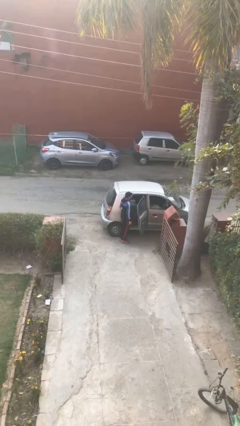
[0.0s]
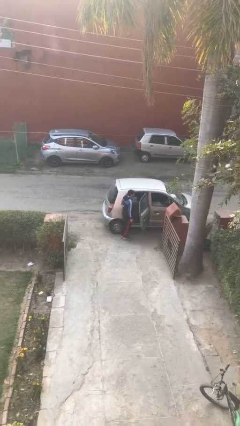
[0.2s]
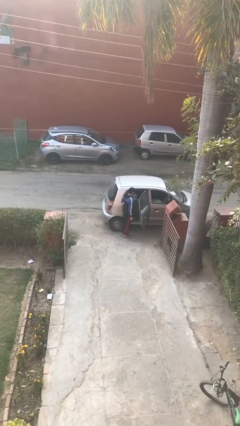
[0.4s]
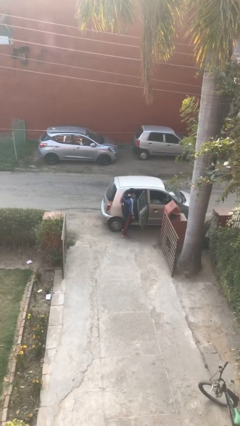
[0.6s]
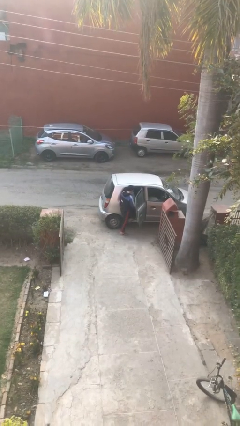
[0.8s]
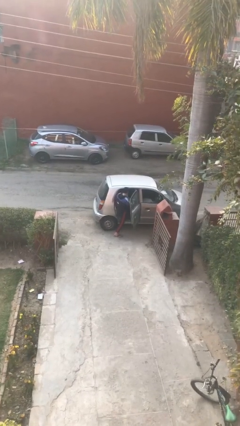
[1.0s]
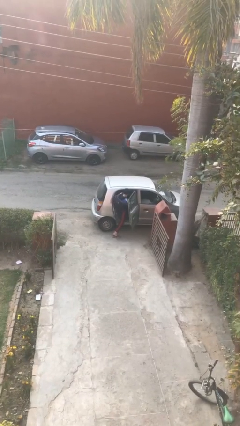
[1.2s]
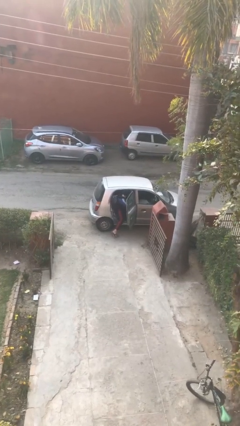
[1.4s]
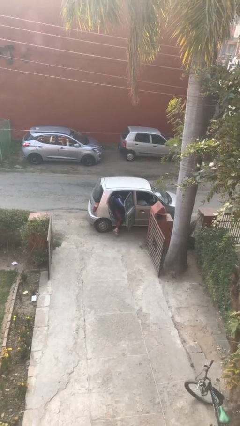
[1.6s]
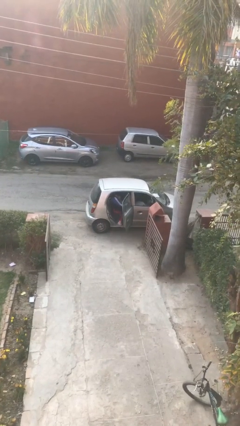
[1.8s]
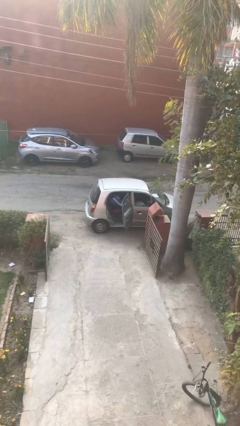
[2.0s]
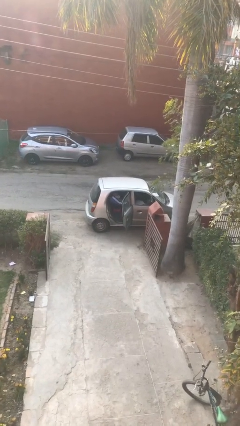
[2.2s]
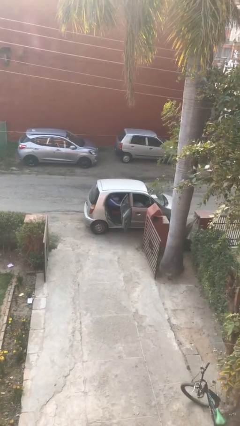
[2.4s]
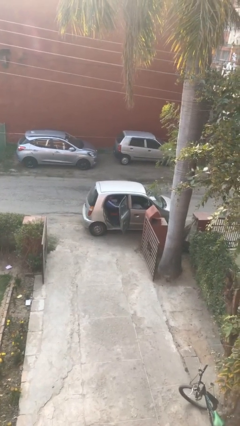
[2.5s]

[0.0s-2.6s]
person enters car

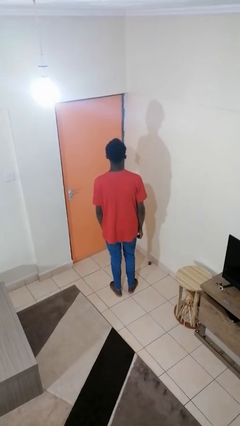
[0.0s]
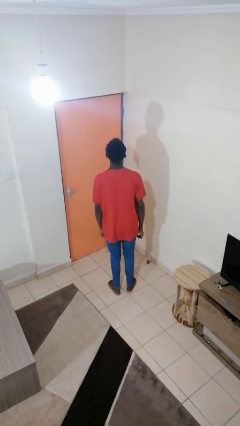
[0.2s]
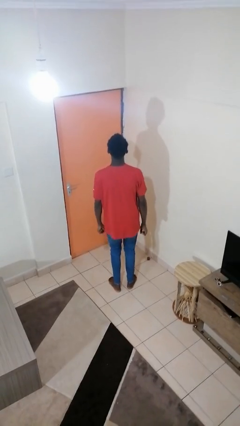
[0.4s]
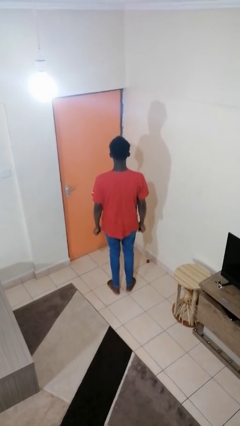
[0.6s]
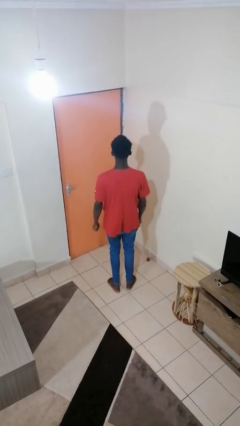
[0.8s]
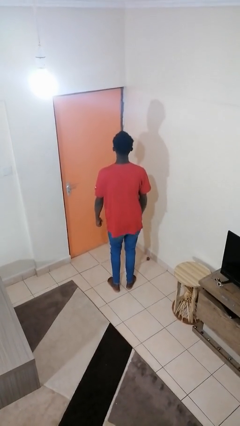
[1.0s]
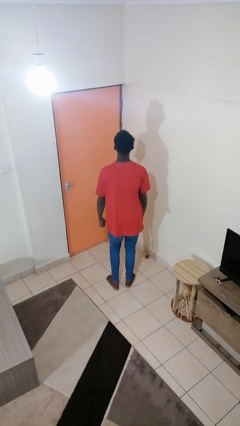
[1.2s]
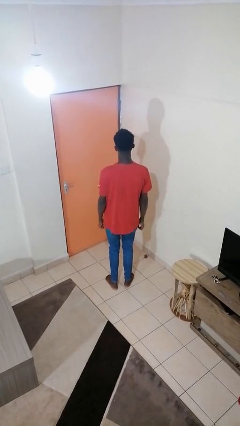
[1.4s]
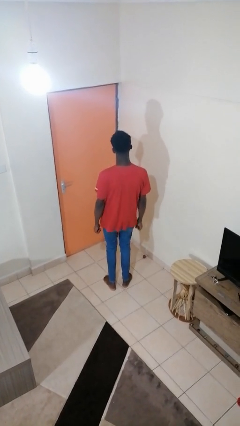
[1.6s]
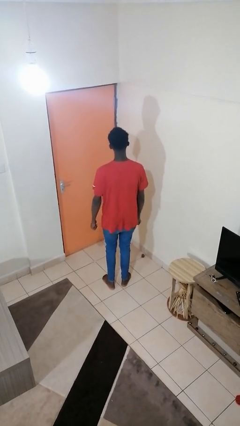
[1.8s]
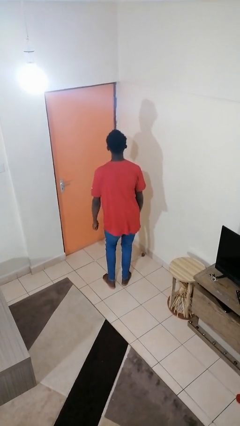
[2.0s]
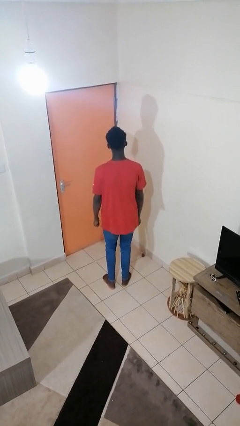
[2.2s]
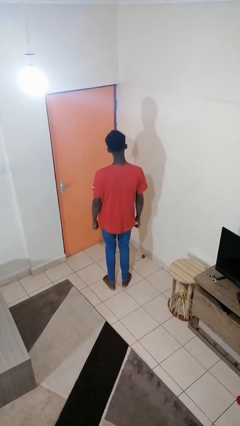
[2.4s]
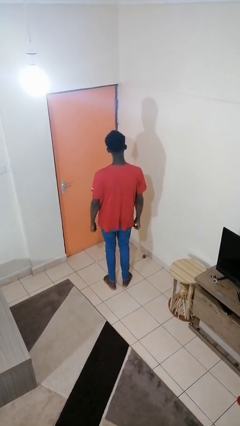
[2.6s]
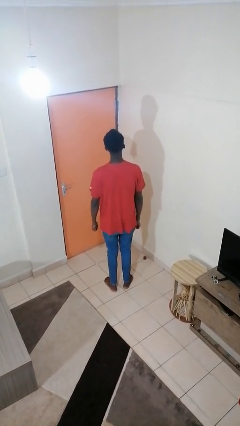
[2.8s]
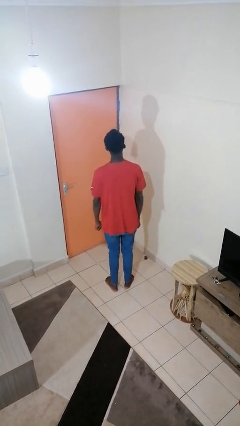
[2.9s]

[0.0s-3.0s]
person wiggles hips

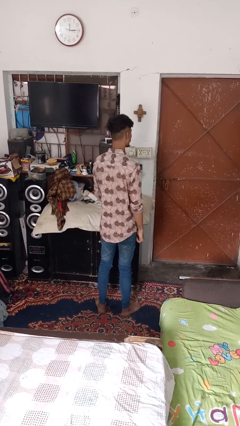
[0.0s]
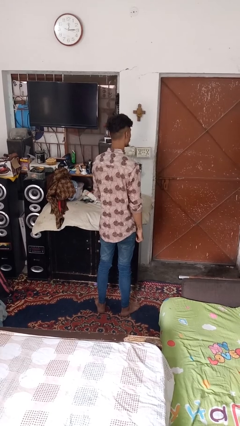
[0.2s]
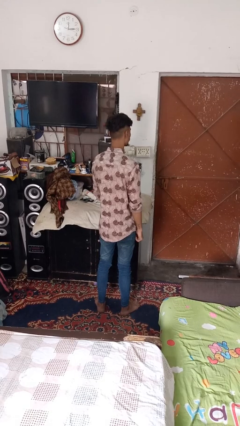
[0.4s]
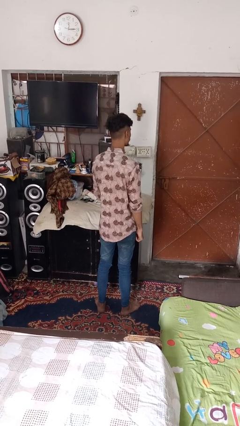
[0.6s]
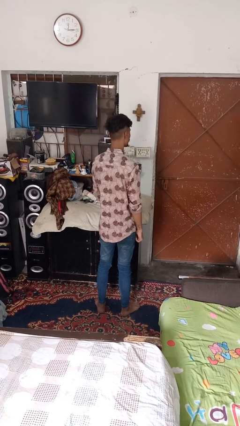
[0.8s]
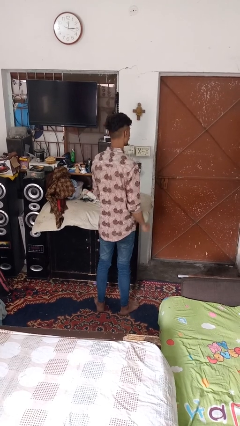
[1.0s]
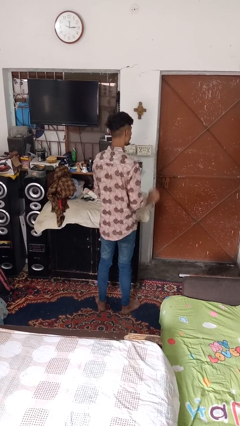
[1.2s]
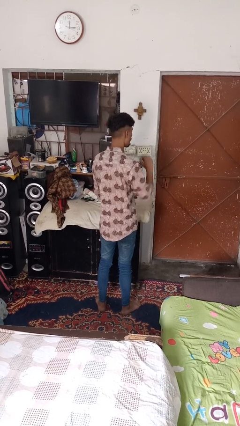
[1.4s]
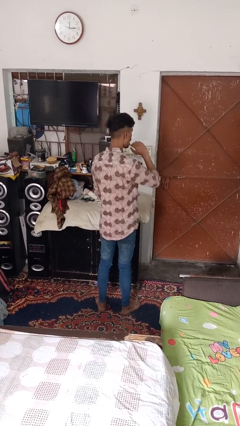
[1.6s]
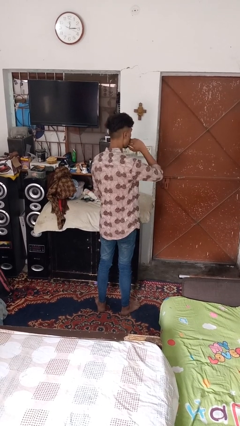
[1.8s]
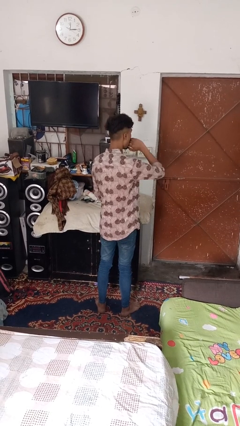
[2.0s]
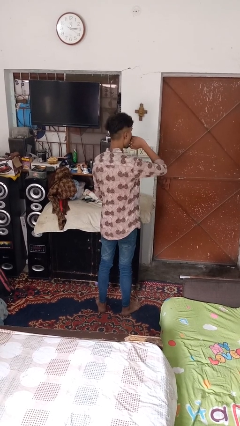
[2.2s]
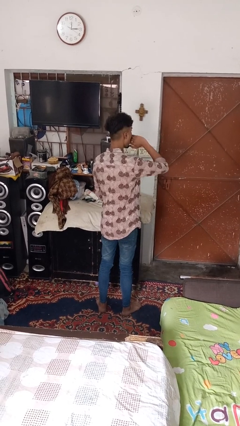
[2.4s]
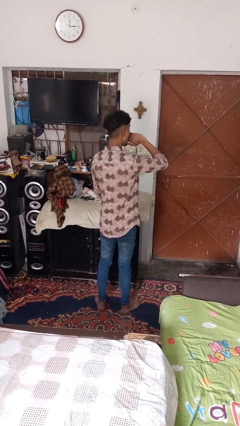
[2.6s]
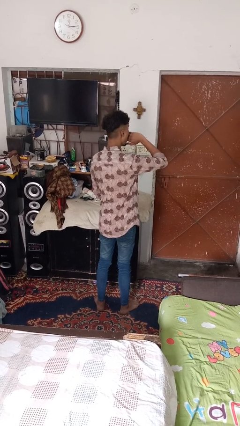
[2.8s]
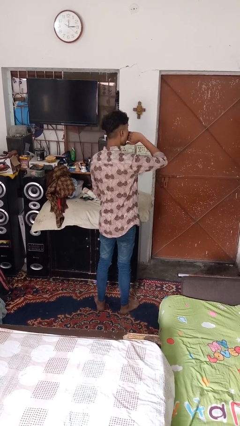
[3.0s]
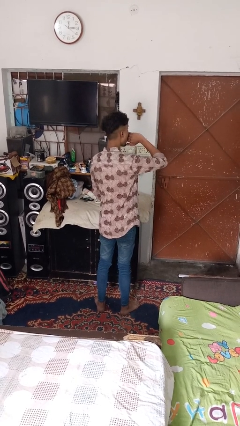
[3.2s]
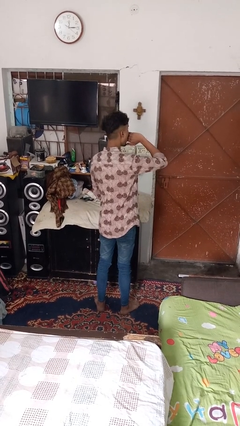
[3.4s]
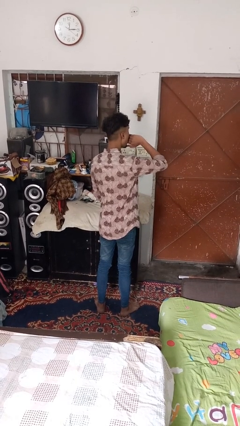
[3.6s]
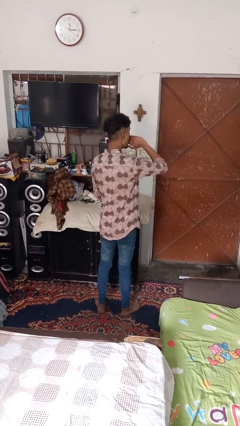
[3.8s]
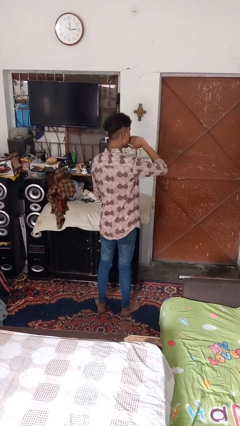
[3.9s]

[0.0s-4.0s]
person yawns

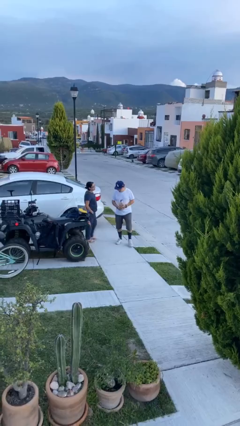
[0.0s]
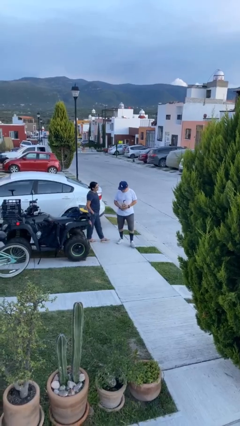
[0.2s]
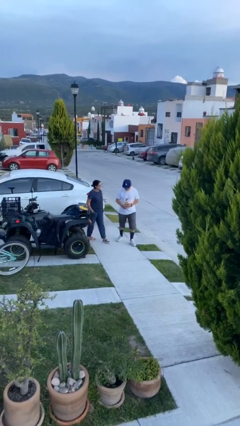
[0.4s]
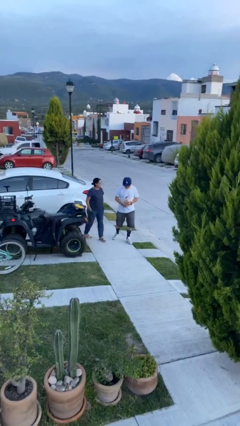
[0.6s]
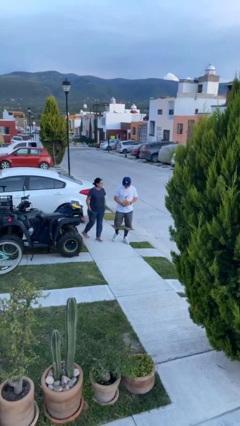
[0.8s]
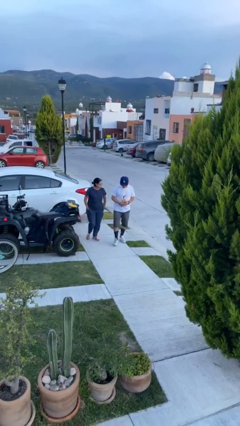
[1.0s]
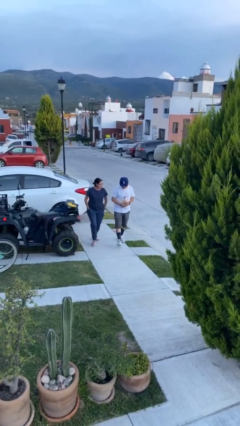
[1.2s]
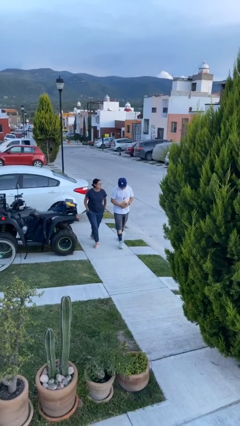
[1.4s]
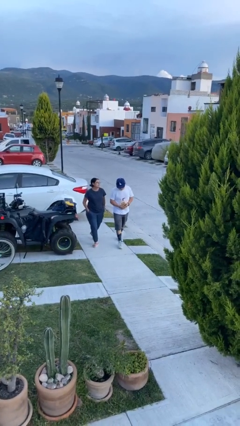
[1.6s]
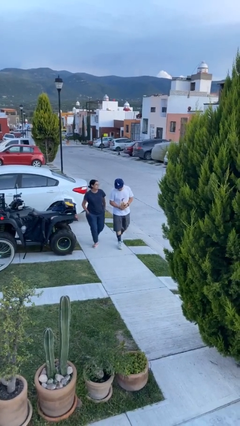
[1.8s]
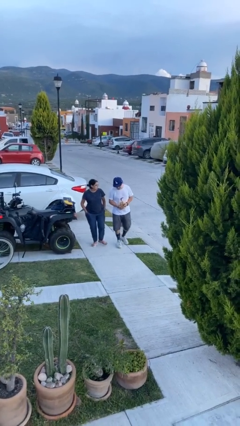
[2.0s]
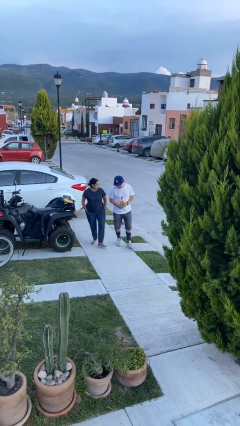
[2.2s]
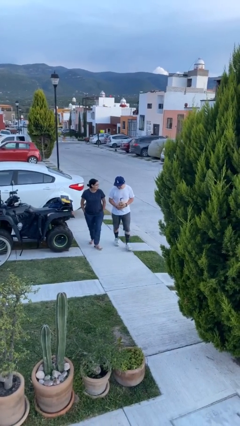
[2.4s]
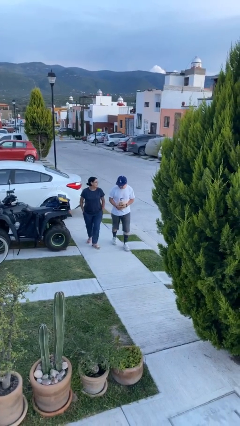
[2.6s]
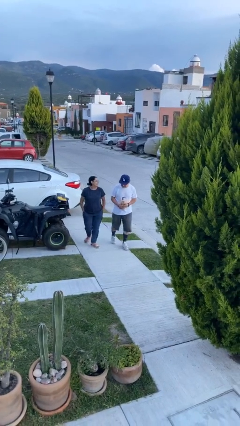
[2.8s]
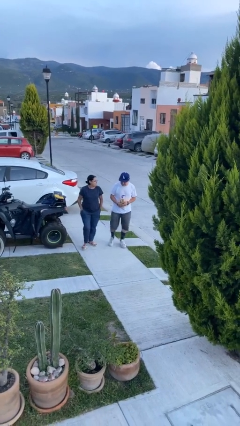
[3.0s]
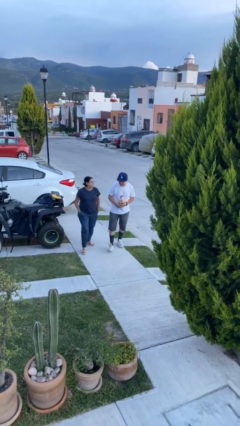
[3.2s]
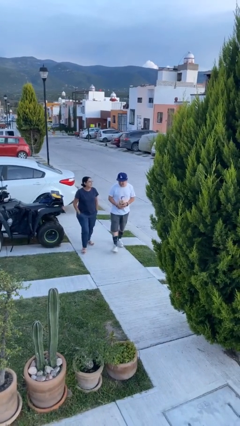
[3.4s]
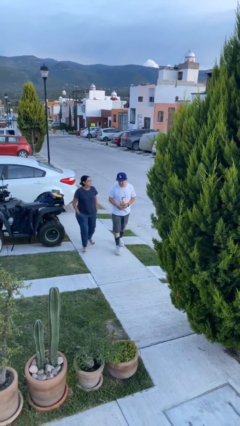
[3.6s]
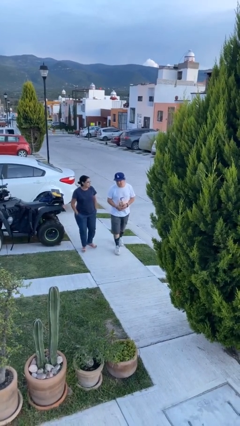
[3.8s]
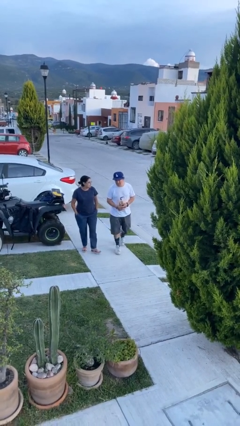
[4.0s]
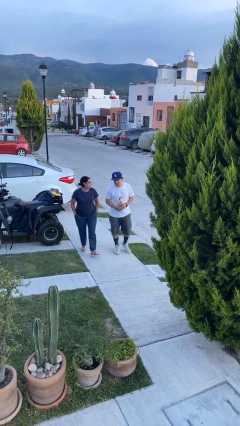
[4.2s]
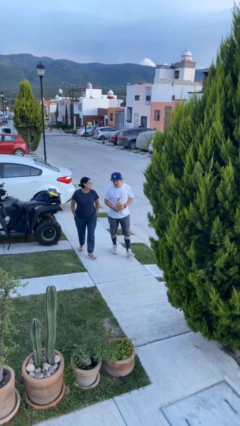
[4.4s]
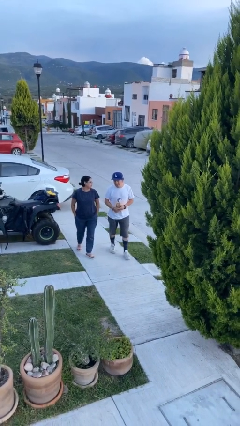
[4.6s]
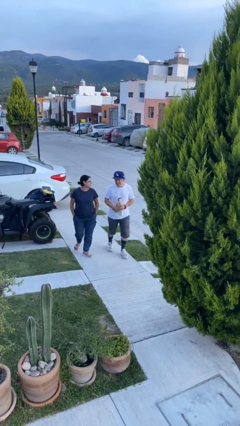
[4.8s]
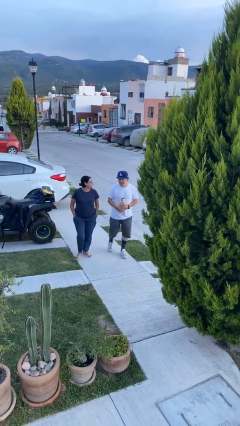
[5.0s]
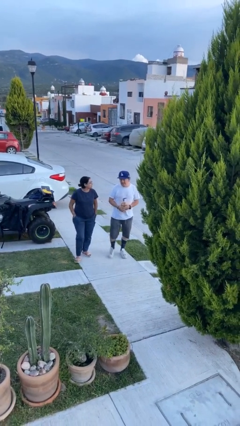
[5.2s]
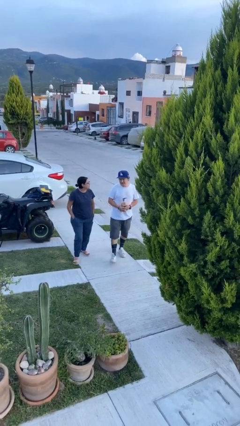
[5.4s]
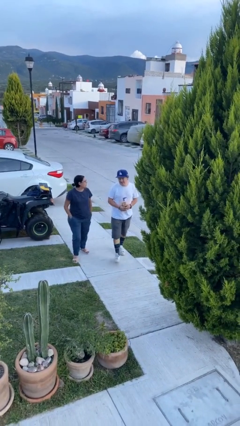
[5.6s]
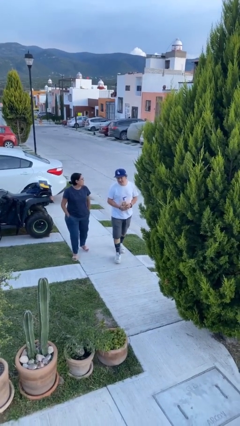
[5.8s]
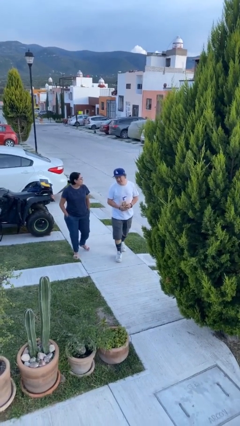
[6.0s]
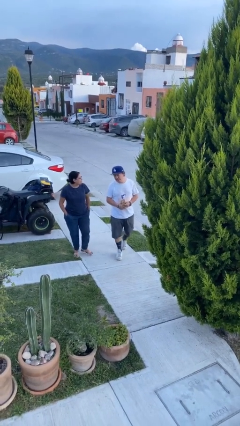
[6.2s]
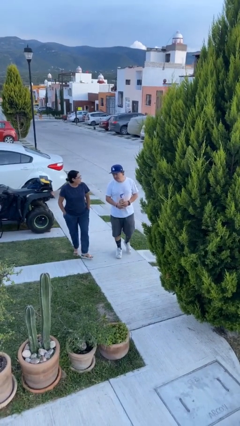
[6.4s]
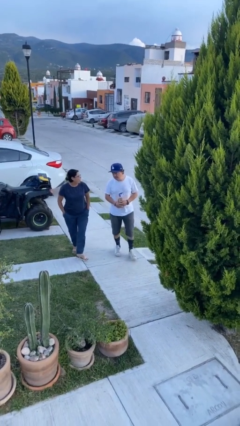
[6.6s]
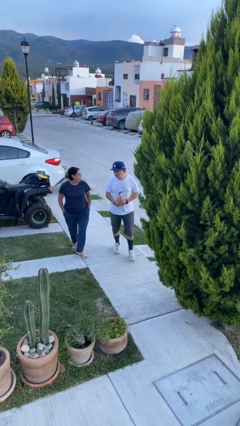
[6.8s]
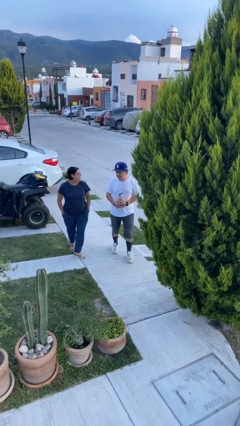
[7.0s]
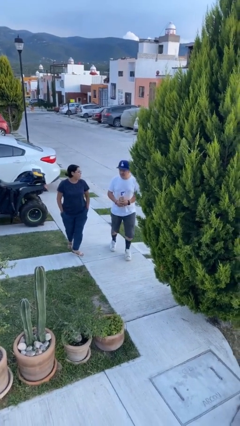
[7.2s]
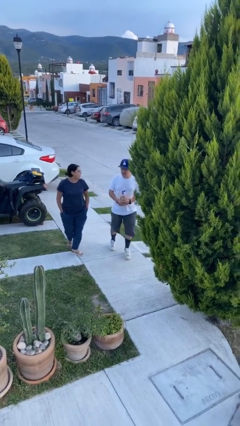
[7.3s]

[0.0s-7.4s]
person talks to person

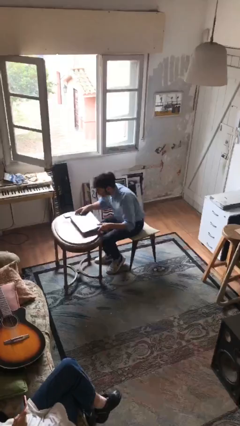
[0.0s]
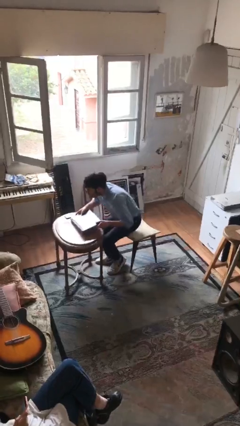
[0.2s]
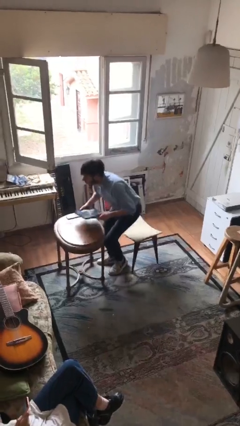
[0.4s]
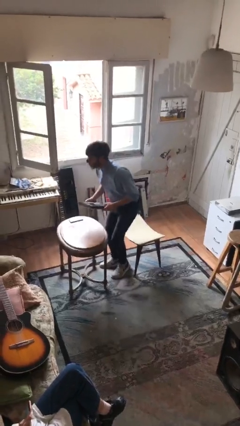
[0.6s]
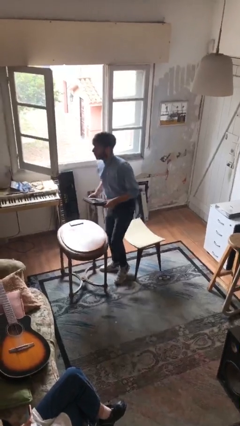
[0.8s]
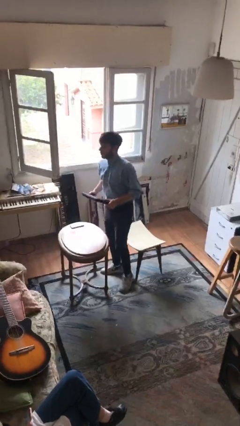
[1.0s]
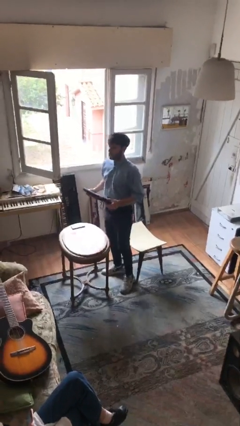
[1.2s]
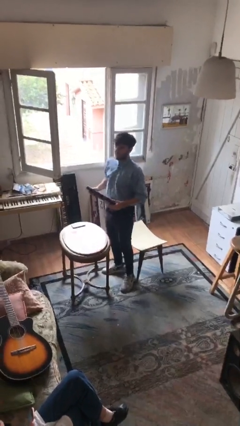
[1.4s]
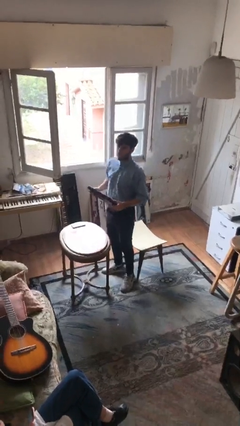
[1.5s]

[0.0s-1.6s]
person stands up
